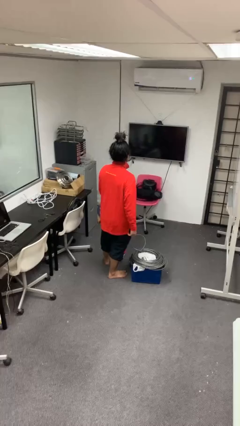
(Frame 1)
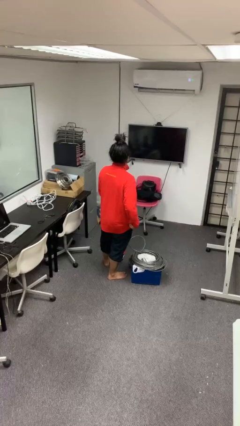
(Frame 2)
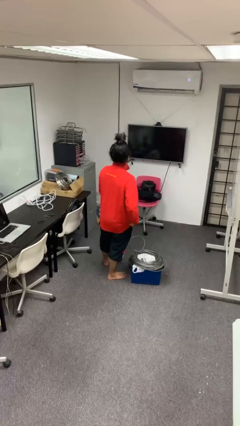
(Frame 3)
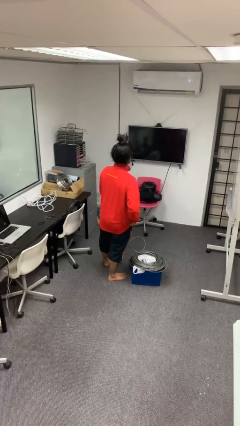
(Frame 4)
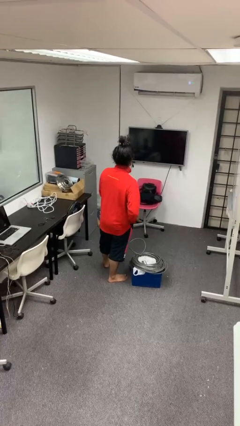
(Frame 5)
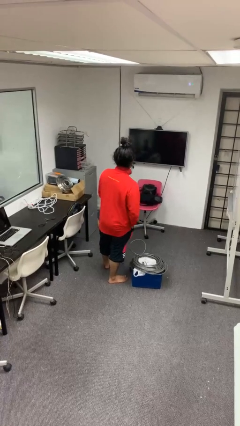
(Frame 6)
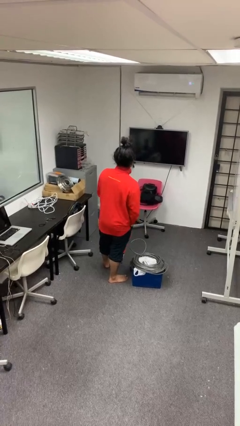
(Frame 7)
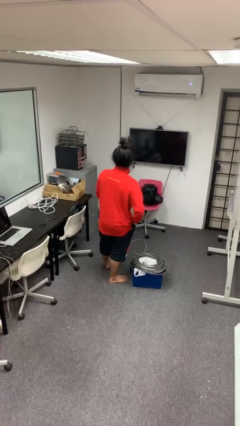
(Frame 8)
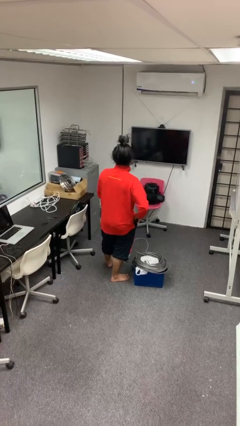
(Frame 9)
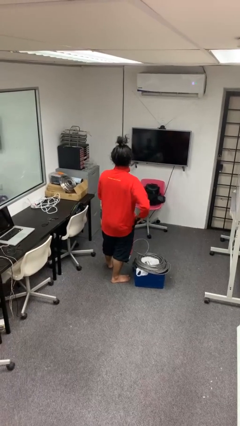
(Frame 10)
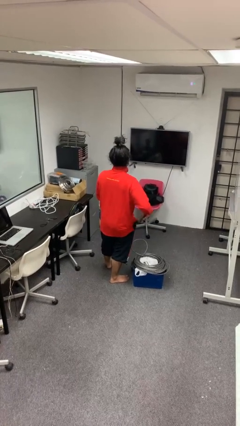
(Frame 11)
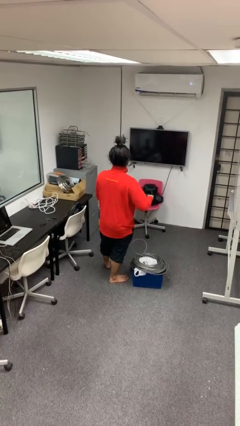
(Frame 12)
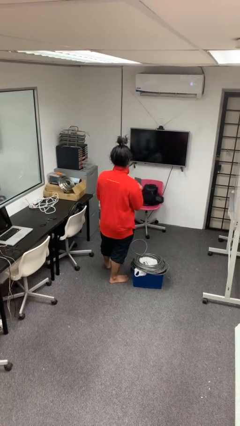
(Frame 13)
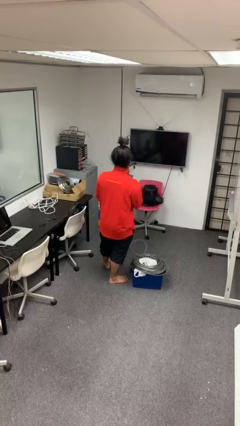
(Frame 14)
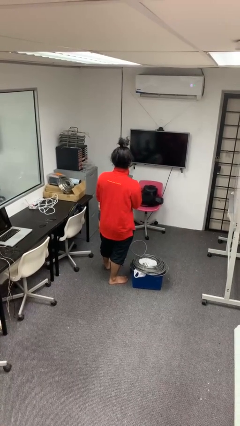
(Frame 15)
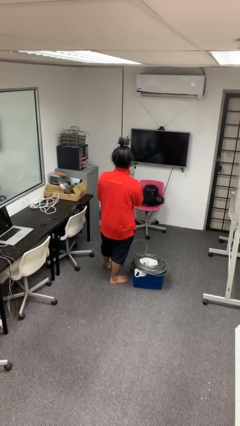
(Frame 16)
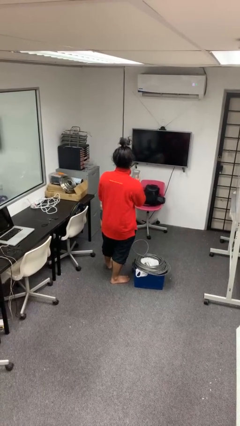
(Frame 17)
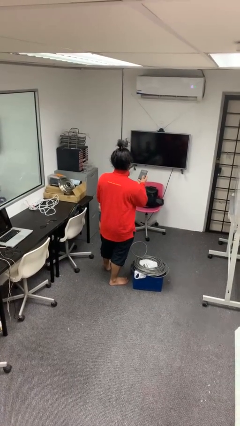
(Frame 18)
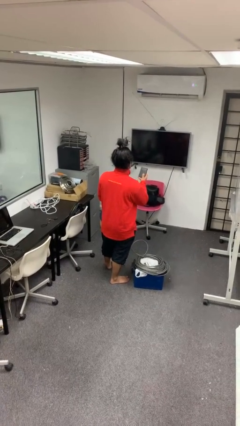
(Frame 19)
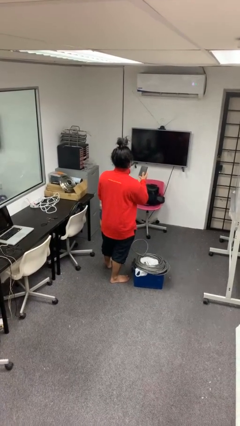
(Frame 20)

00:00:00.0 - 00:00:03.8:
person takes phone from pocket

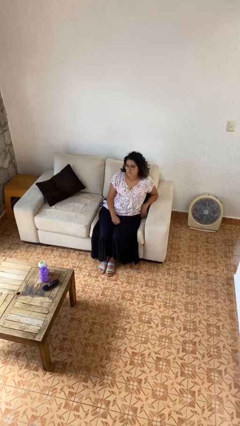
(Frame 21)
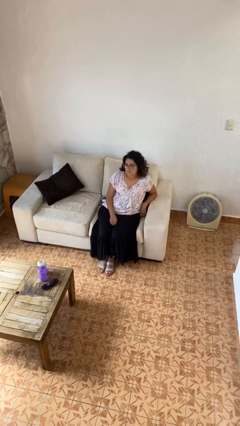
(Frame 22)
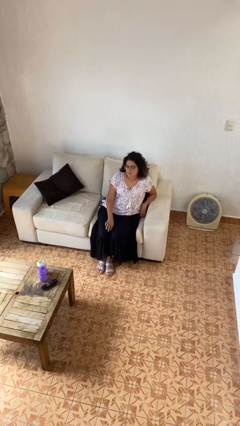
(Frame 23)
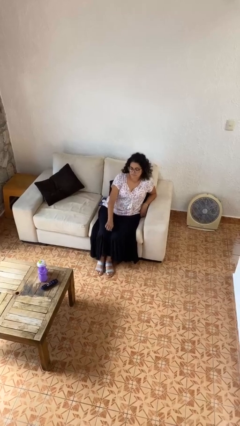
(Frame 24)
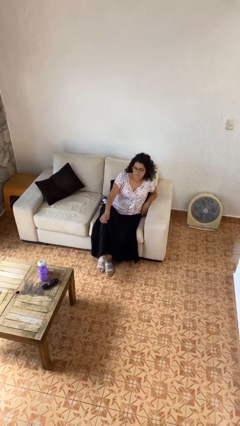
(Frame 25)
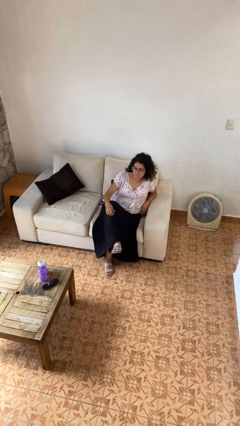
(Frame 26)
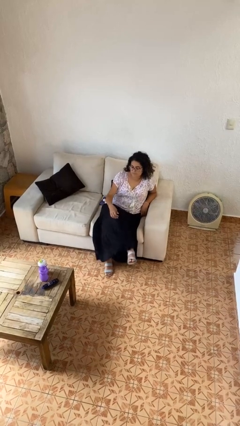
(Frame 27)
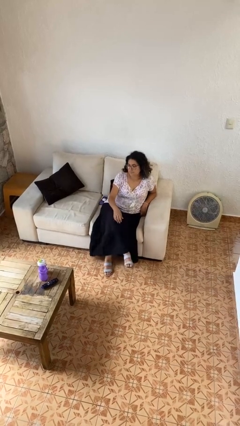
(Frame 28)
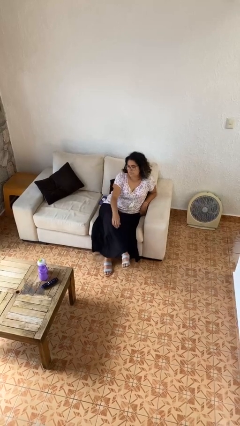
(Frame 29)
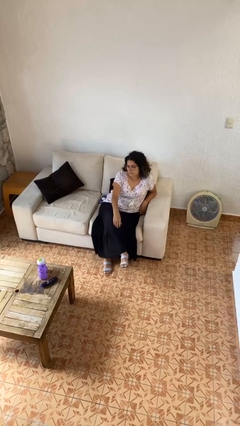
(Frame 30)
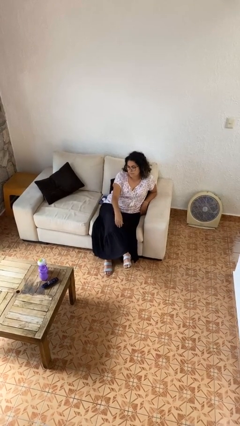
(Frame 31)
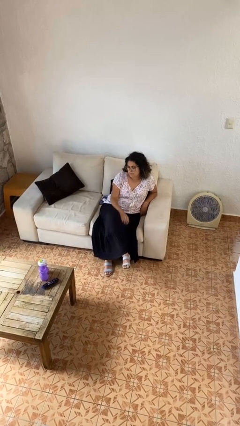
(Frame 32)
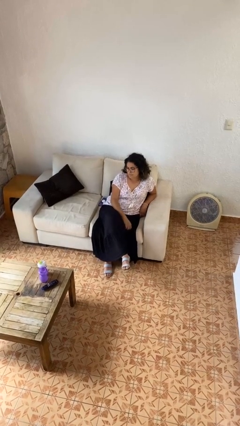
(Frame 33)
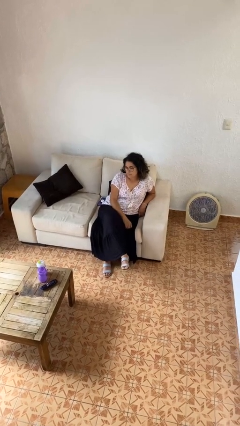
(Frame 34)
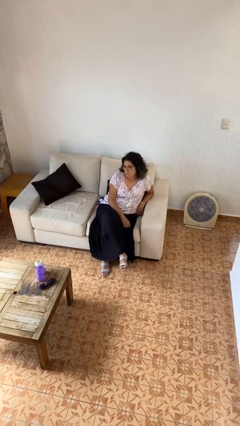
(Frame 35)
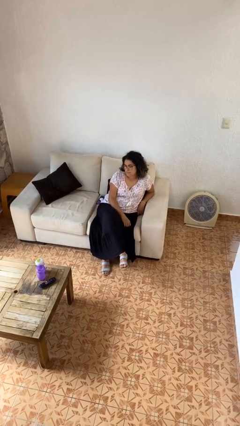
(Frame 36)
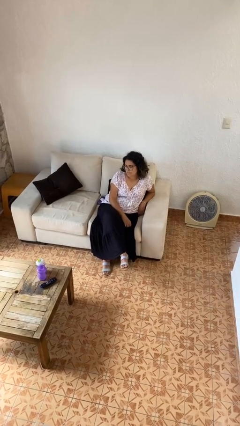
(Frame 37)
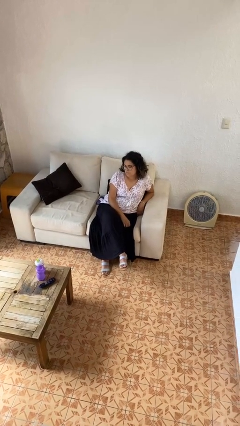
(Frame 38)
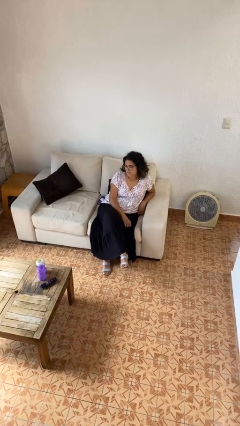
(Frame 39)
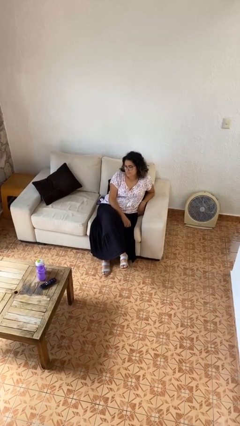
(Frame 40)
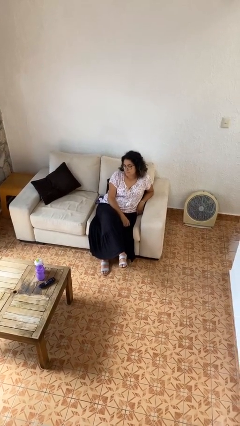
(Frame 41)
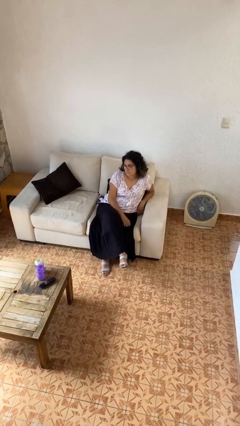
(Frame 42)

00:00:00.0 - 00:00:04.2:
person crosses legs

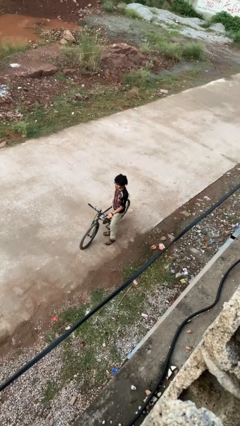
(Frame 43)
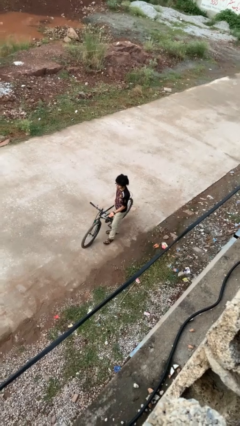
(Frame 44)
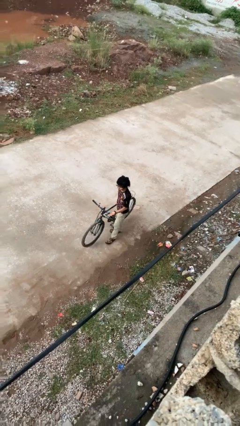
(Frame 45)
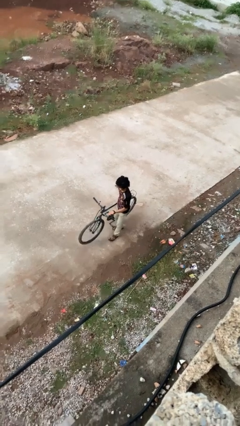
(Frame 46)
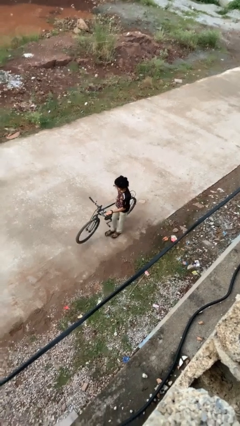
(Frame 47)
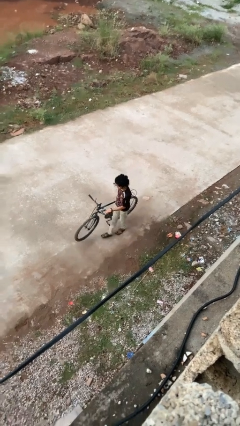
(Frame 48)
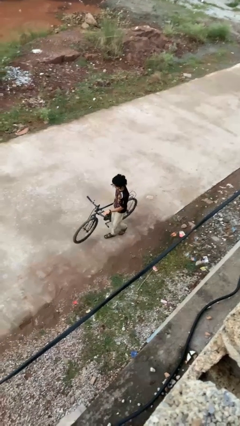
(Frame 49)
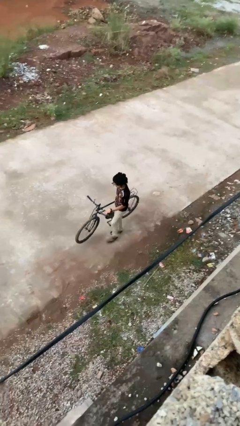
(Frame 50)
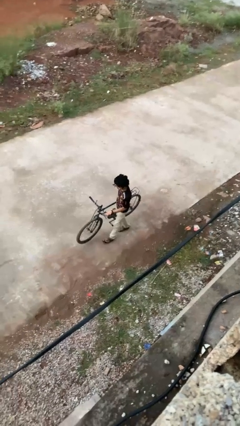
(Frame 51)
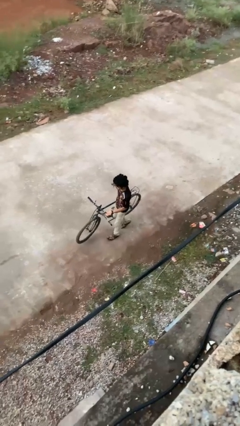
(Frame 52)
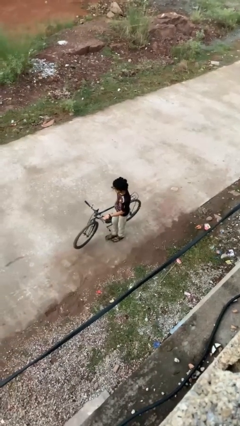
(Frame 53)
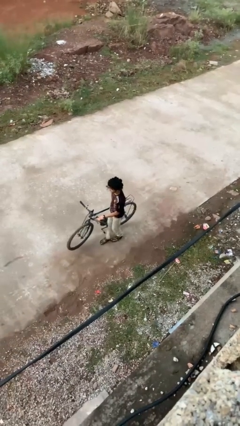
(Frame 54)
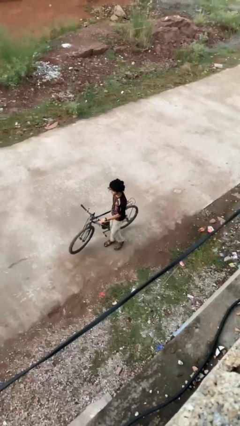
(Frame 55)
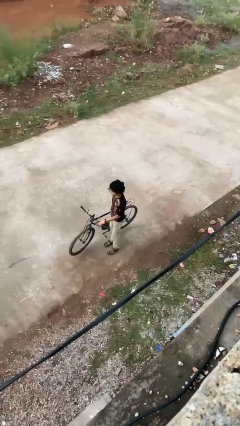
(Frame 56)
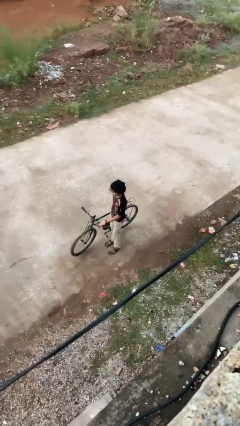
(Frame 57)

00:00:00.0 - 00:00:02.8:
person carries bicycle

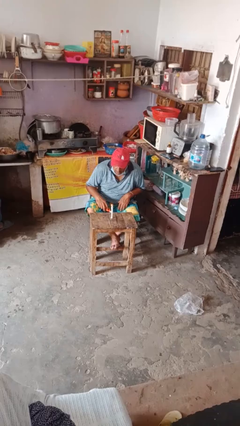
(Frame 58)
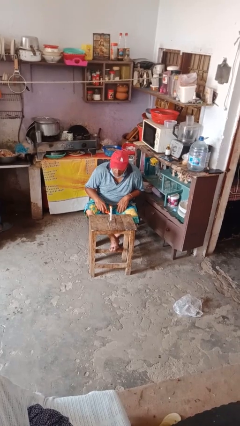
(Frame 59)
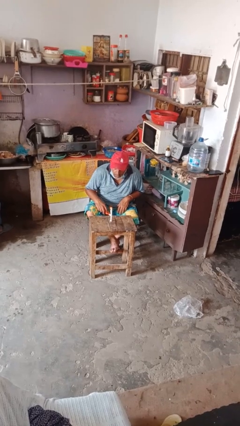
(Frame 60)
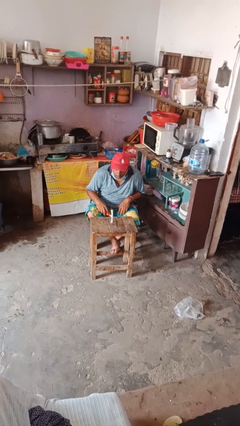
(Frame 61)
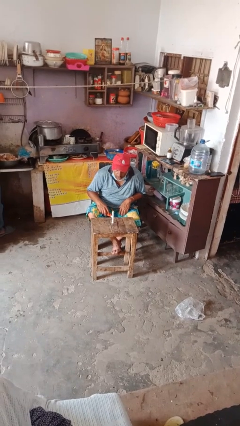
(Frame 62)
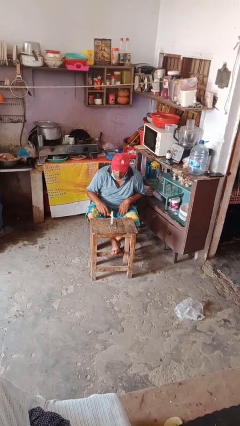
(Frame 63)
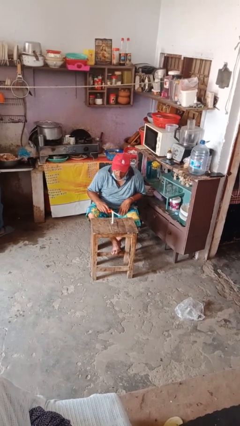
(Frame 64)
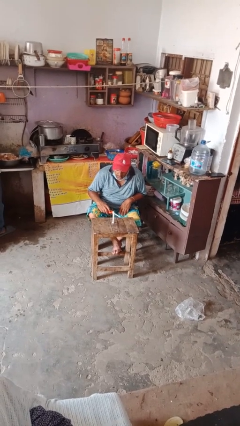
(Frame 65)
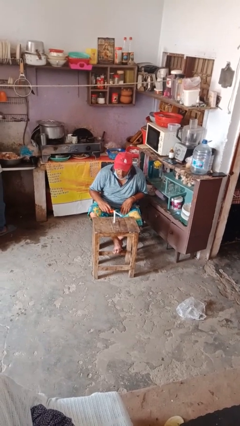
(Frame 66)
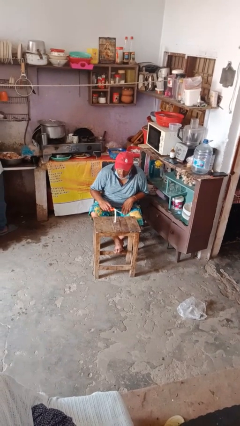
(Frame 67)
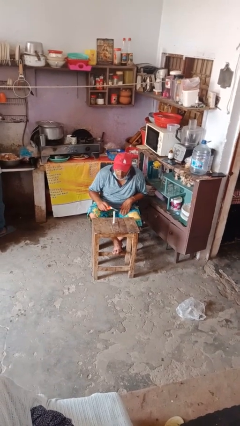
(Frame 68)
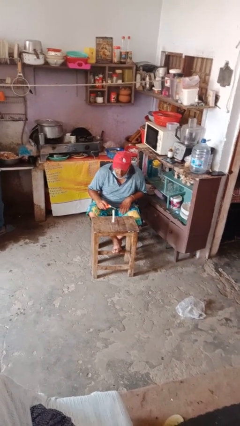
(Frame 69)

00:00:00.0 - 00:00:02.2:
person extinguishes candle

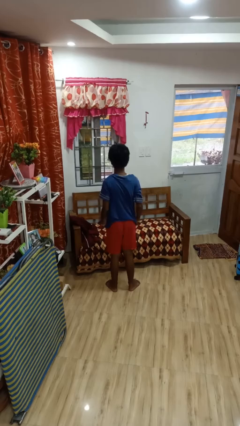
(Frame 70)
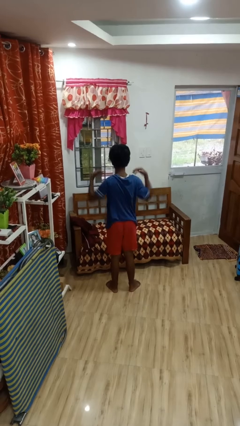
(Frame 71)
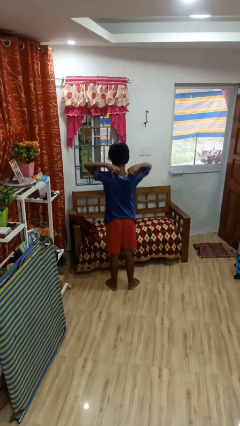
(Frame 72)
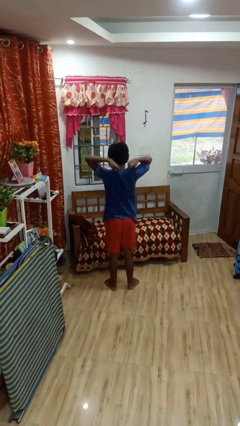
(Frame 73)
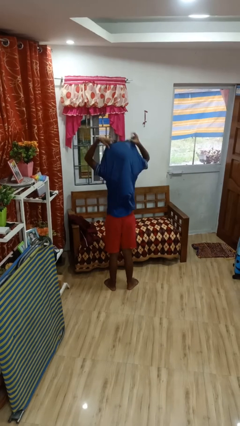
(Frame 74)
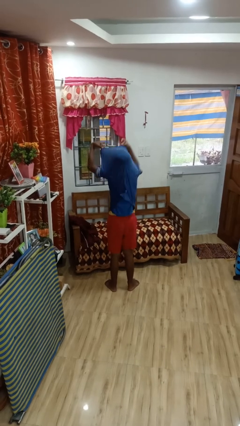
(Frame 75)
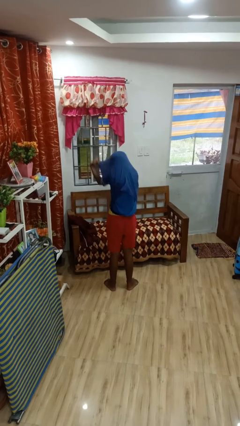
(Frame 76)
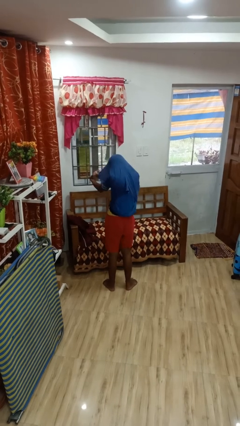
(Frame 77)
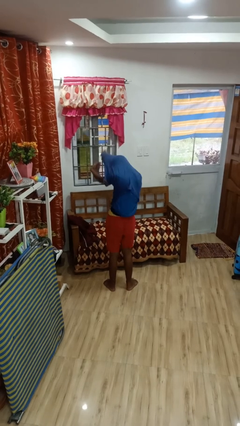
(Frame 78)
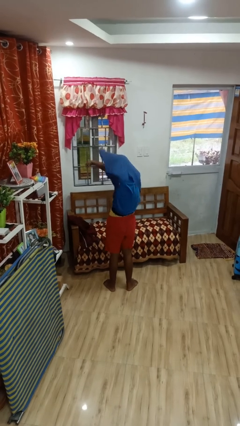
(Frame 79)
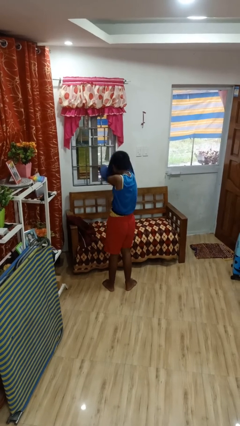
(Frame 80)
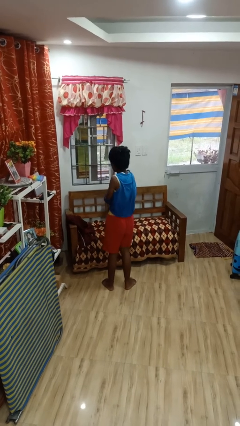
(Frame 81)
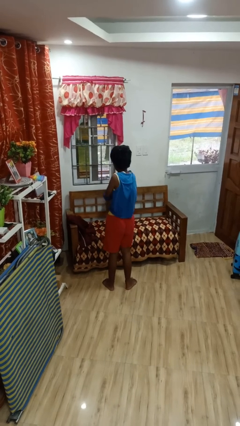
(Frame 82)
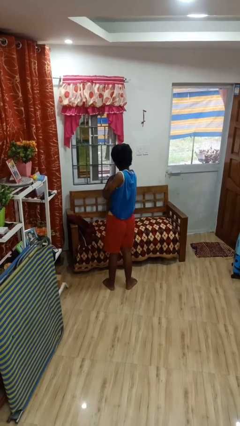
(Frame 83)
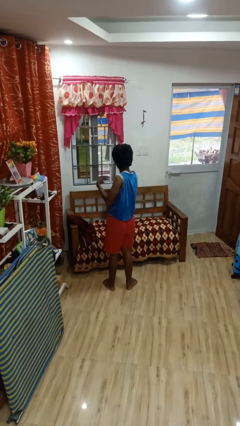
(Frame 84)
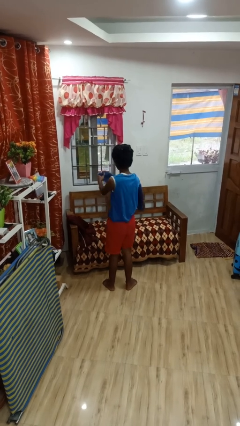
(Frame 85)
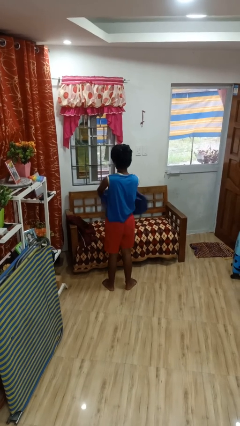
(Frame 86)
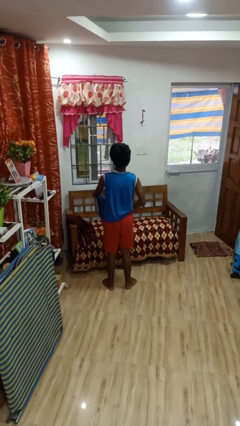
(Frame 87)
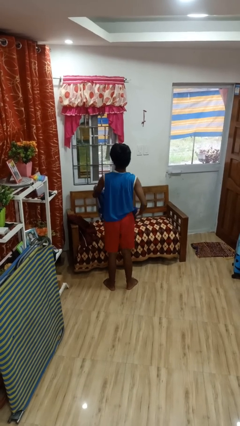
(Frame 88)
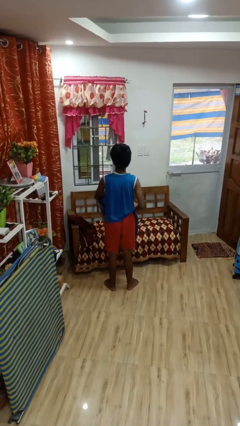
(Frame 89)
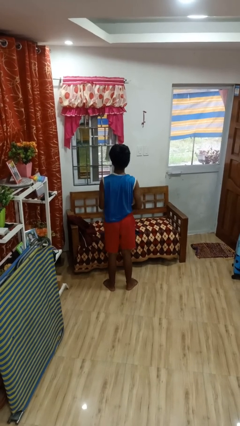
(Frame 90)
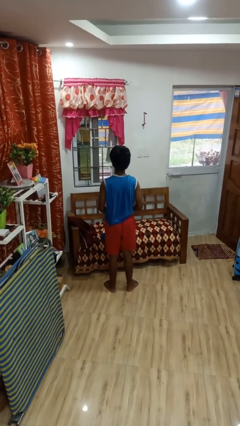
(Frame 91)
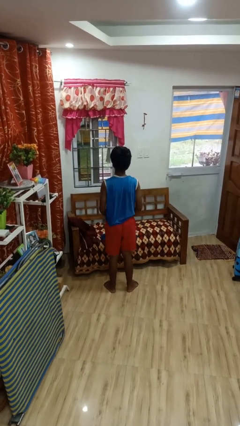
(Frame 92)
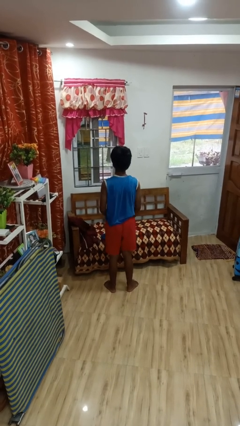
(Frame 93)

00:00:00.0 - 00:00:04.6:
person takes off shirt

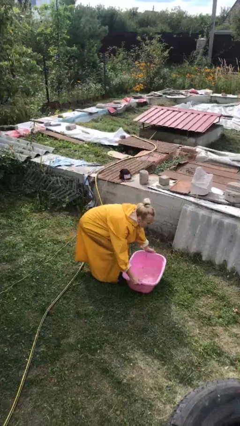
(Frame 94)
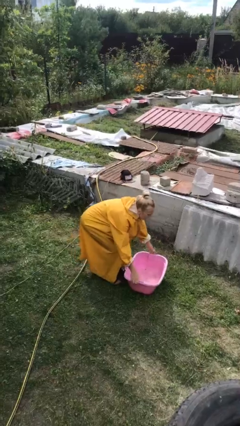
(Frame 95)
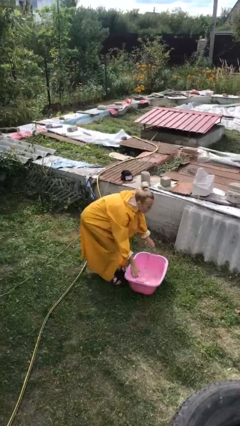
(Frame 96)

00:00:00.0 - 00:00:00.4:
person puts down object on floor
